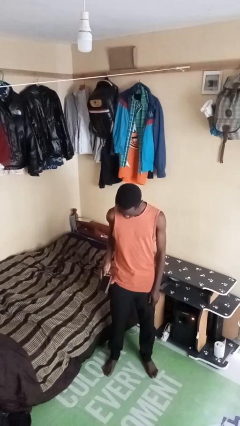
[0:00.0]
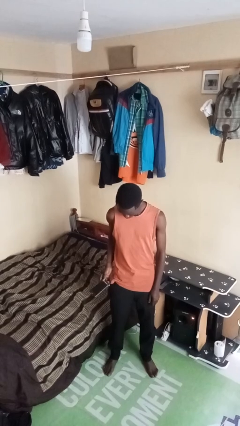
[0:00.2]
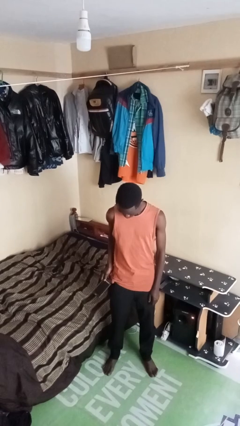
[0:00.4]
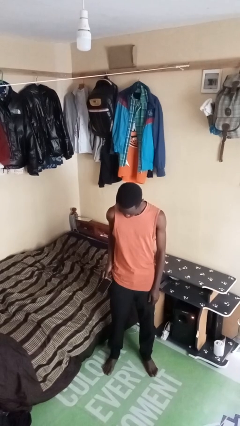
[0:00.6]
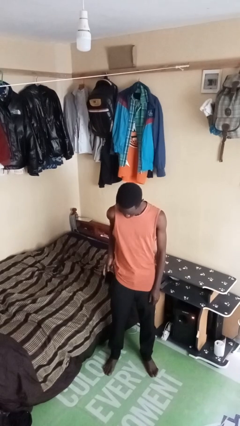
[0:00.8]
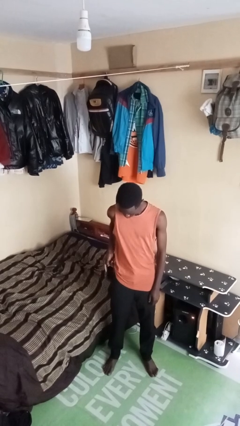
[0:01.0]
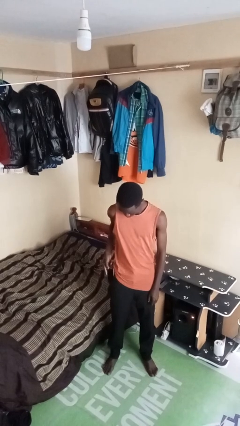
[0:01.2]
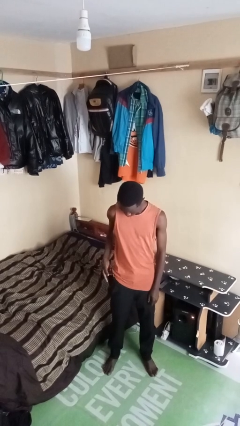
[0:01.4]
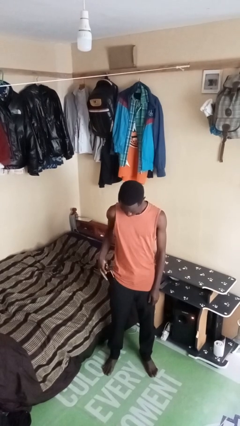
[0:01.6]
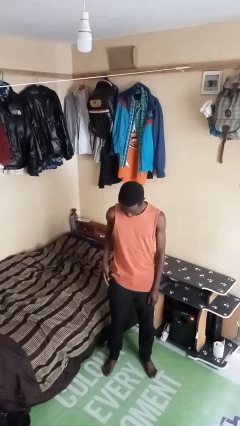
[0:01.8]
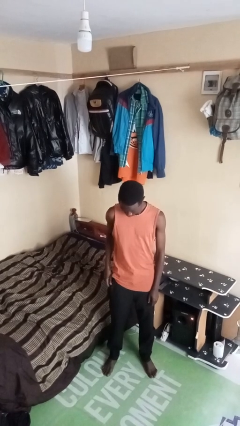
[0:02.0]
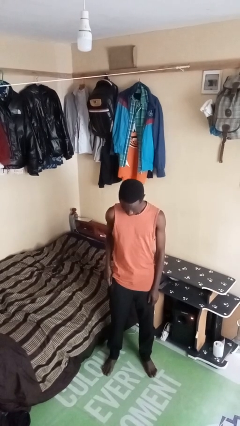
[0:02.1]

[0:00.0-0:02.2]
person puts phone into pocket

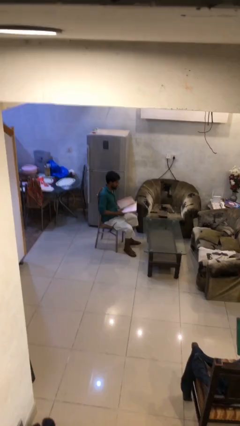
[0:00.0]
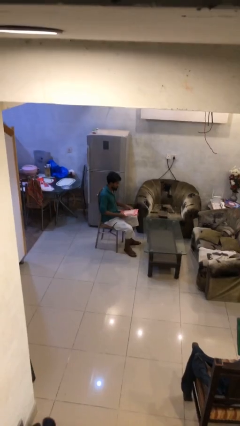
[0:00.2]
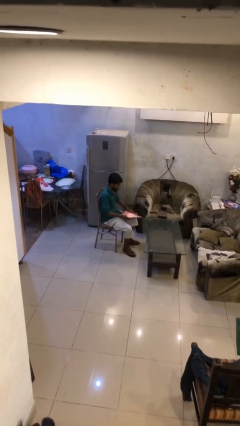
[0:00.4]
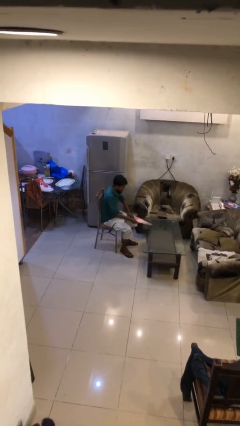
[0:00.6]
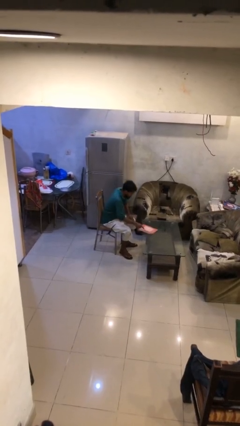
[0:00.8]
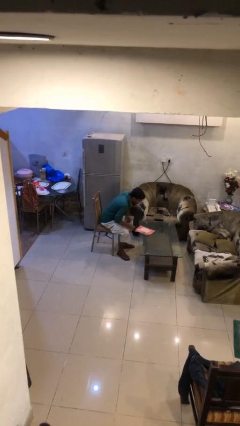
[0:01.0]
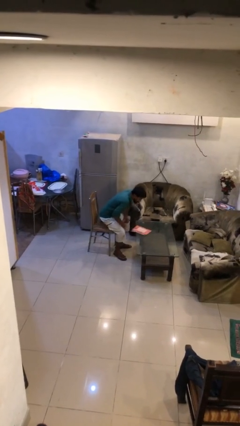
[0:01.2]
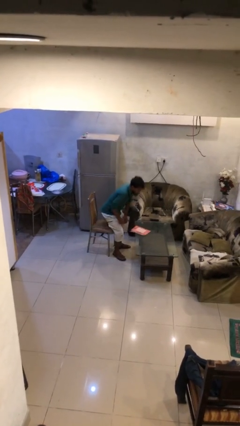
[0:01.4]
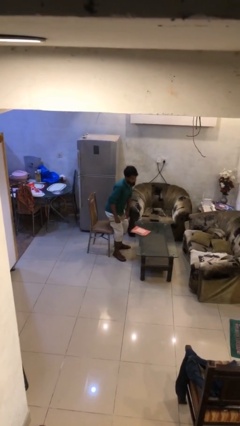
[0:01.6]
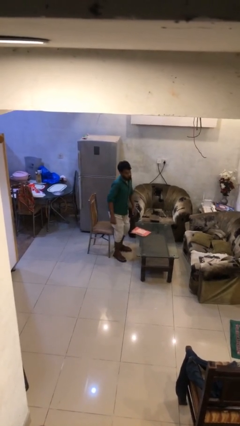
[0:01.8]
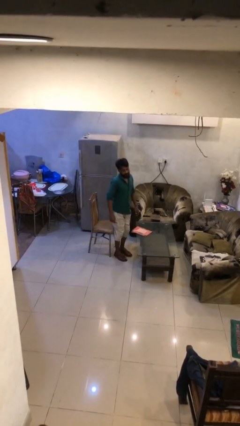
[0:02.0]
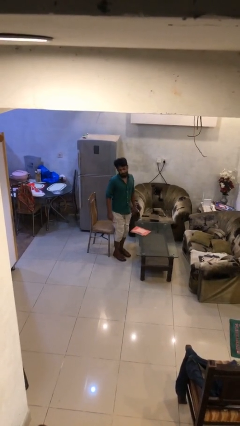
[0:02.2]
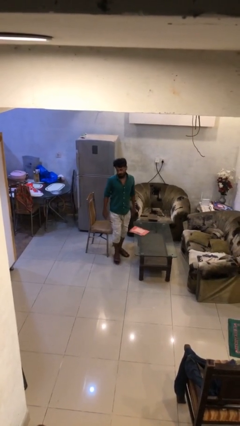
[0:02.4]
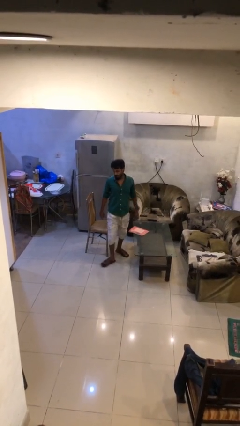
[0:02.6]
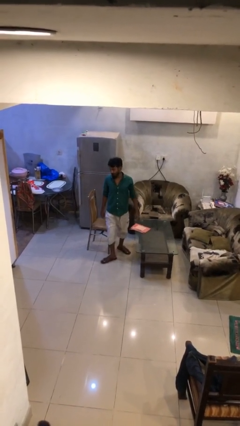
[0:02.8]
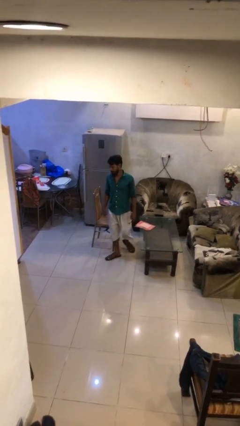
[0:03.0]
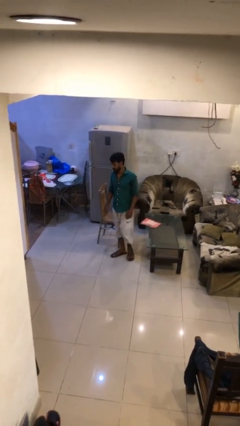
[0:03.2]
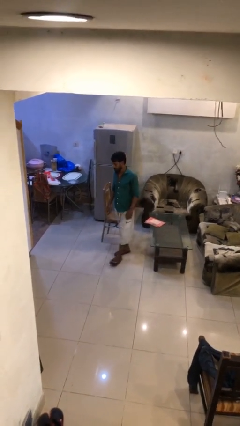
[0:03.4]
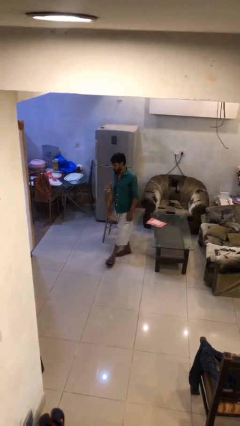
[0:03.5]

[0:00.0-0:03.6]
person stands up

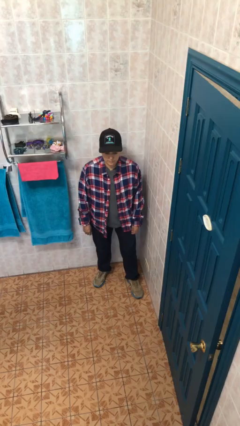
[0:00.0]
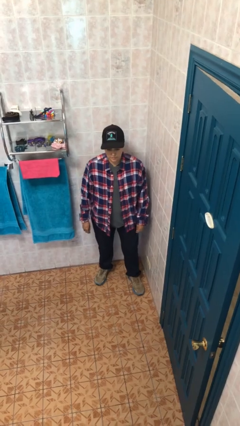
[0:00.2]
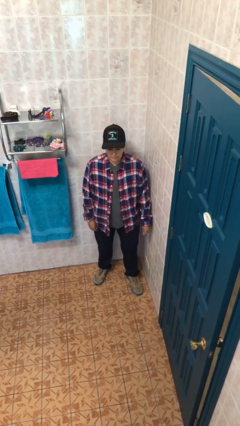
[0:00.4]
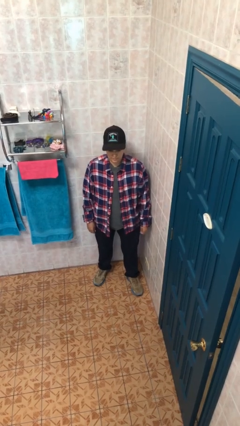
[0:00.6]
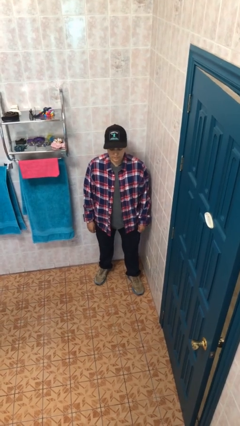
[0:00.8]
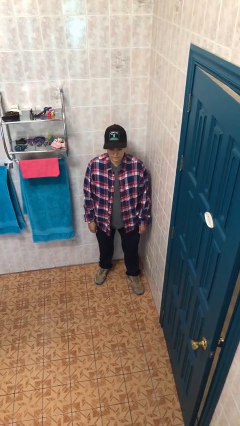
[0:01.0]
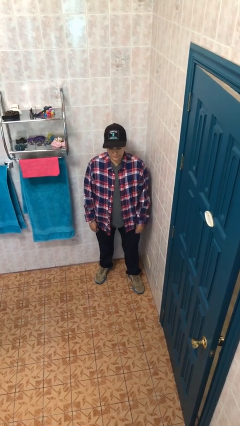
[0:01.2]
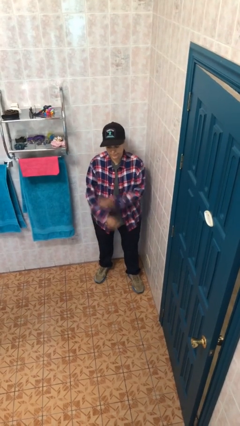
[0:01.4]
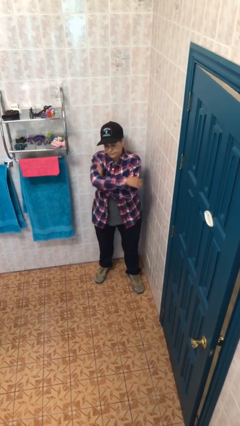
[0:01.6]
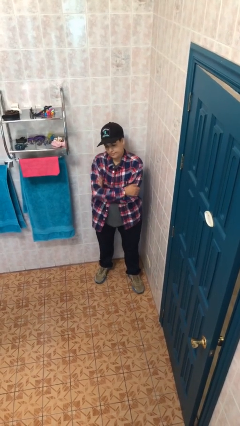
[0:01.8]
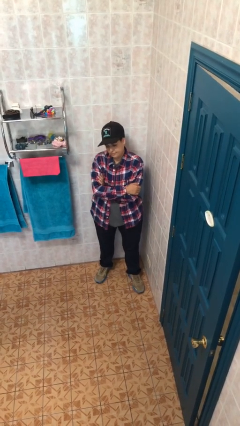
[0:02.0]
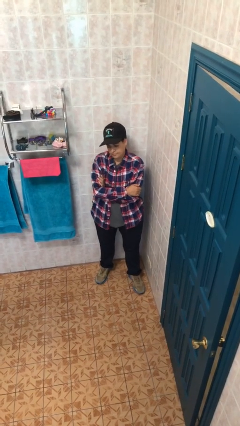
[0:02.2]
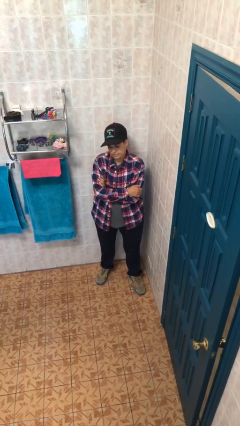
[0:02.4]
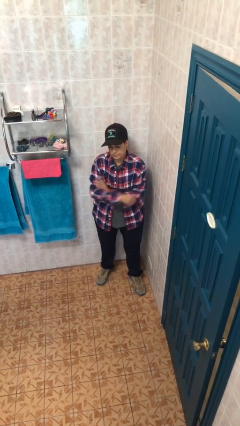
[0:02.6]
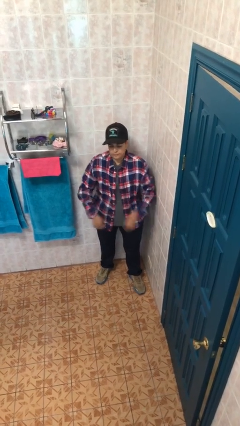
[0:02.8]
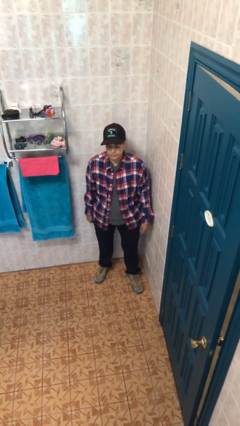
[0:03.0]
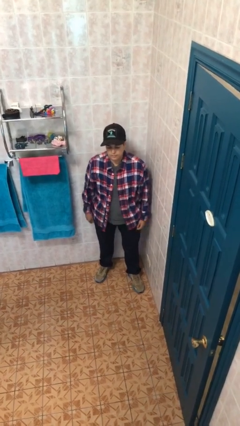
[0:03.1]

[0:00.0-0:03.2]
person crosses arms

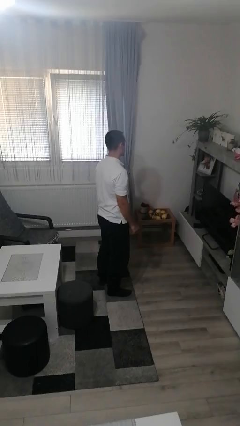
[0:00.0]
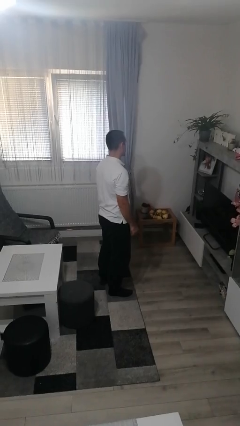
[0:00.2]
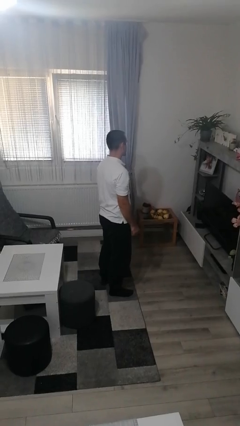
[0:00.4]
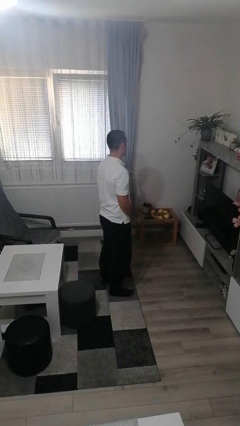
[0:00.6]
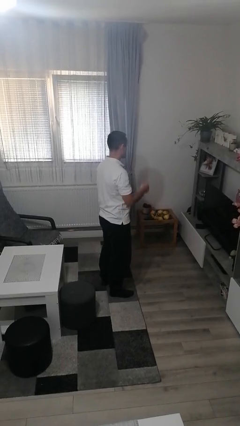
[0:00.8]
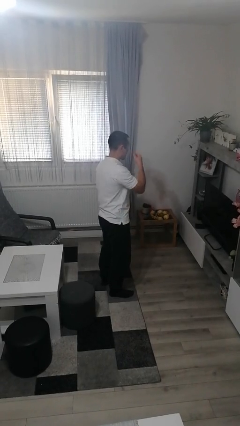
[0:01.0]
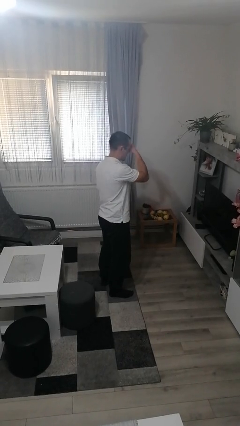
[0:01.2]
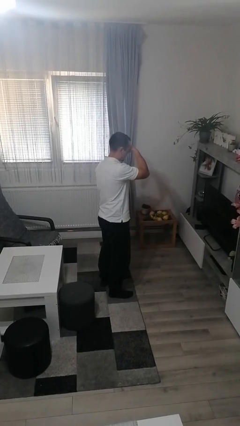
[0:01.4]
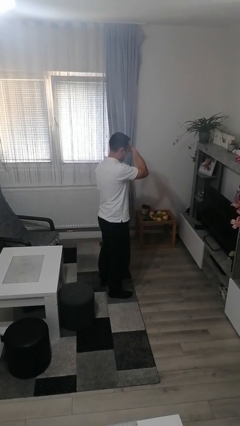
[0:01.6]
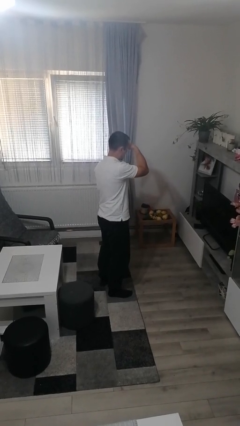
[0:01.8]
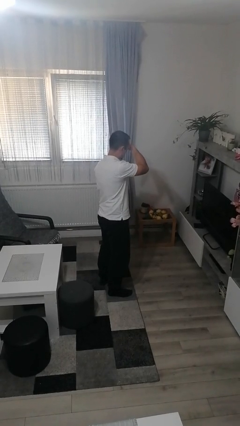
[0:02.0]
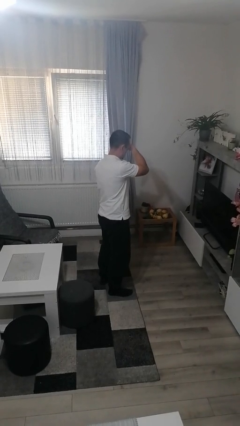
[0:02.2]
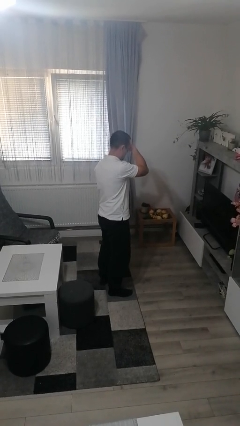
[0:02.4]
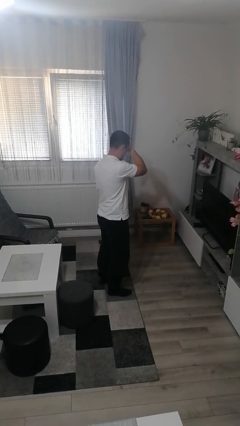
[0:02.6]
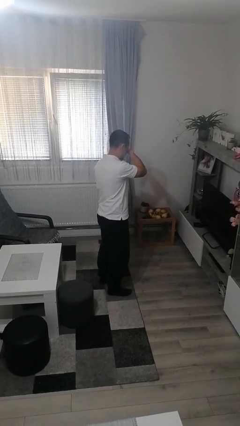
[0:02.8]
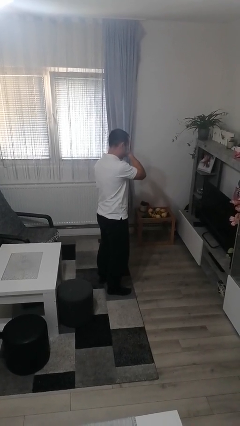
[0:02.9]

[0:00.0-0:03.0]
person rubs eyes

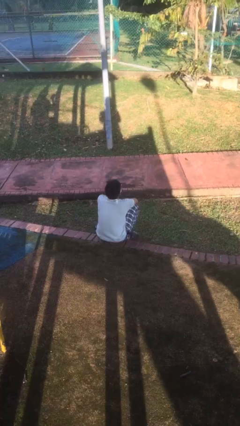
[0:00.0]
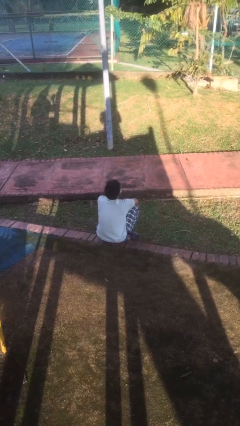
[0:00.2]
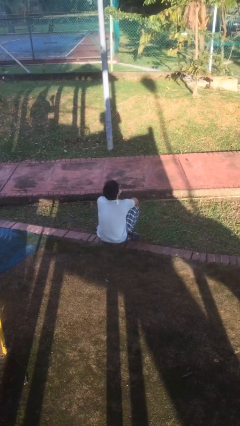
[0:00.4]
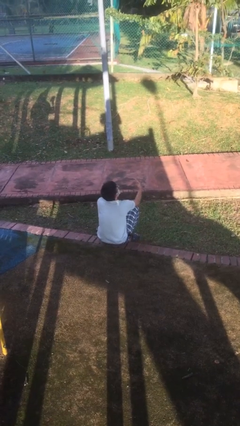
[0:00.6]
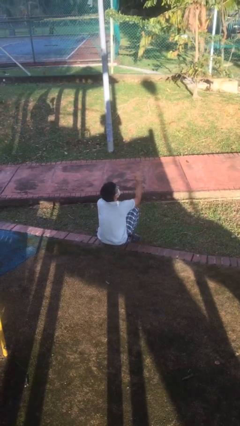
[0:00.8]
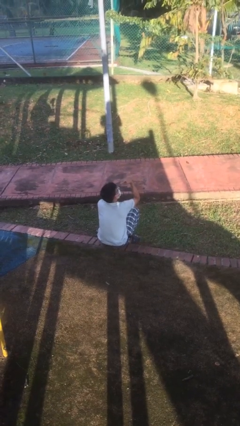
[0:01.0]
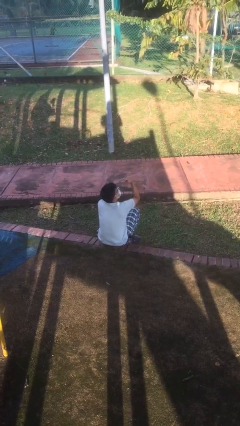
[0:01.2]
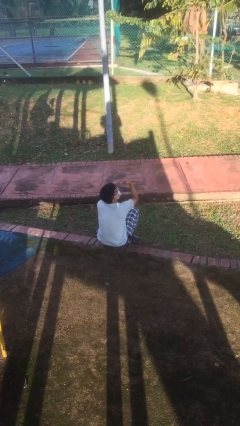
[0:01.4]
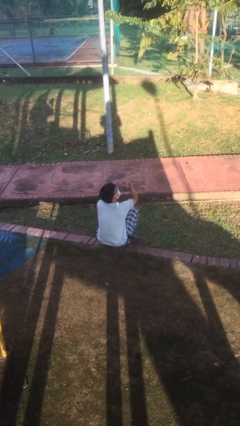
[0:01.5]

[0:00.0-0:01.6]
person gestures watch closely

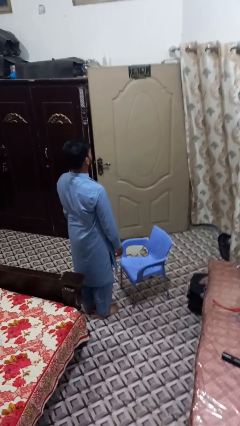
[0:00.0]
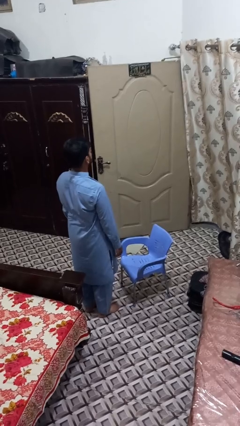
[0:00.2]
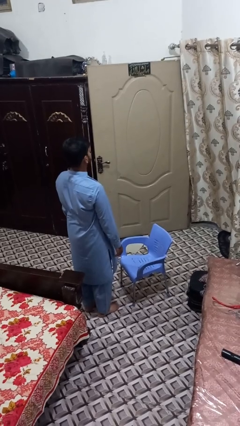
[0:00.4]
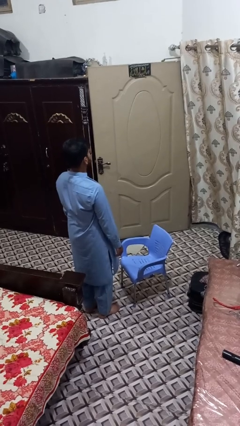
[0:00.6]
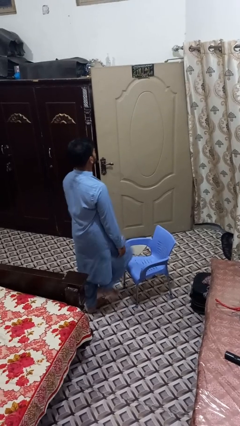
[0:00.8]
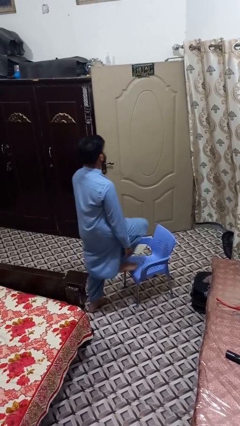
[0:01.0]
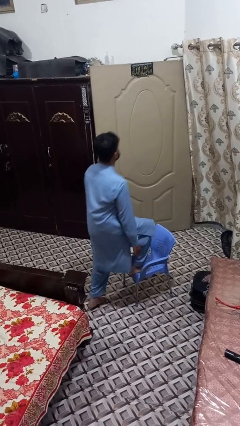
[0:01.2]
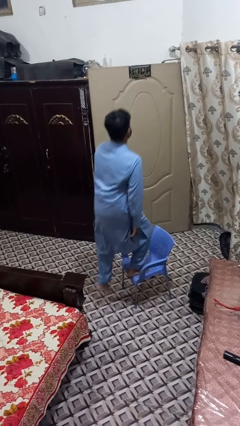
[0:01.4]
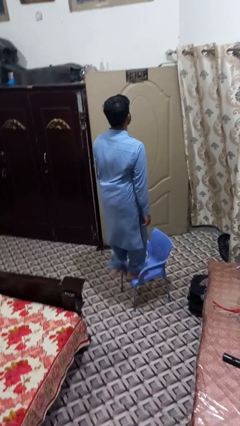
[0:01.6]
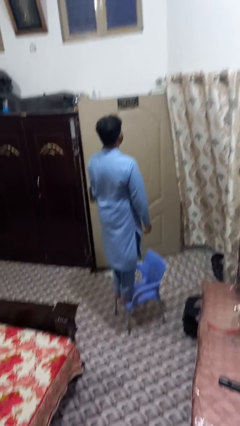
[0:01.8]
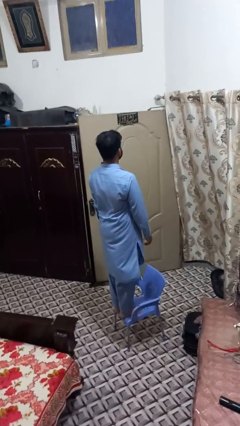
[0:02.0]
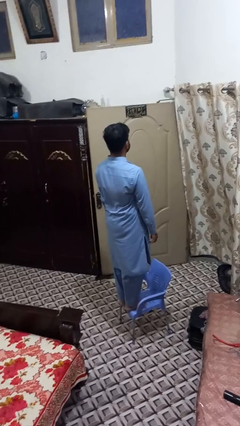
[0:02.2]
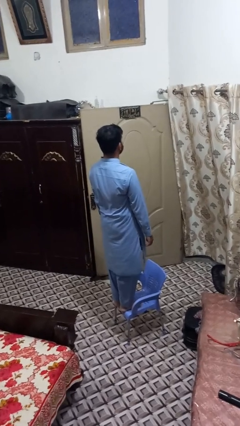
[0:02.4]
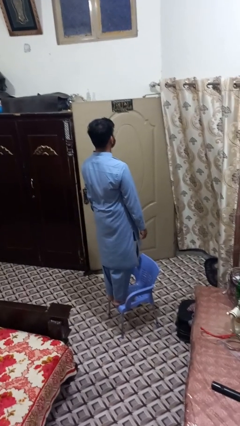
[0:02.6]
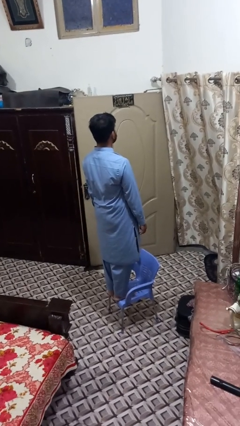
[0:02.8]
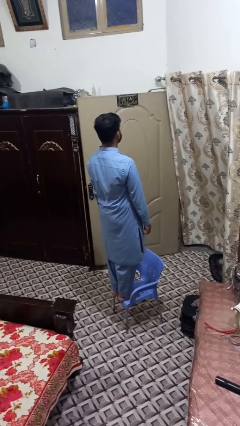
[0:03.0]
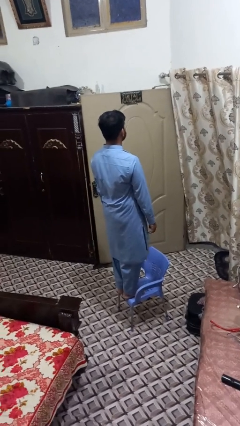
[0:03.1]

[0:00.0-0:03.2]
person climbs on chair
